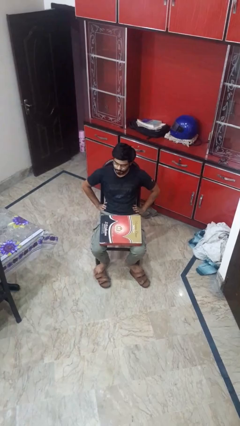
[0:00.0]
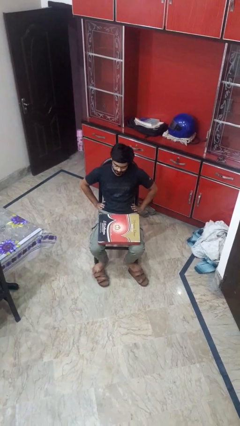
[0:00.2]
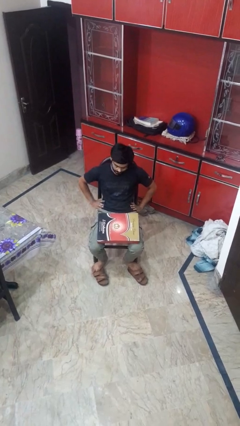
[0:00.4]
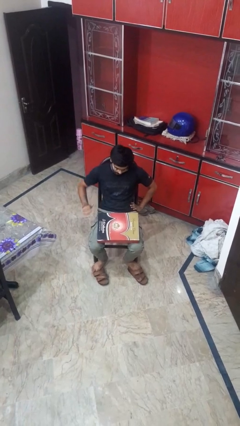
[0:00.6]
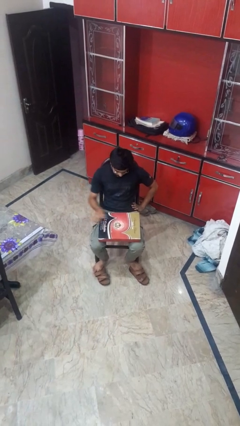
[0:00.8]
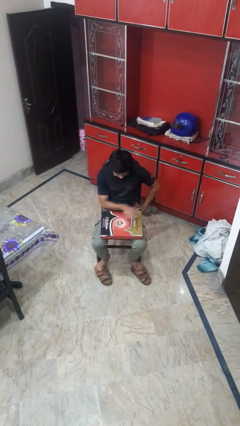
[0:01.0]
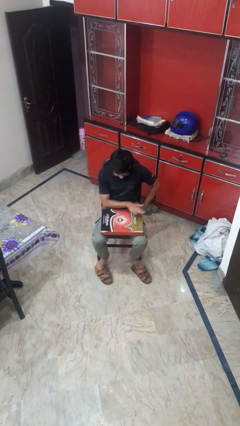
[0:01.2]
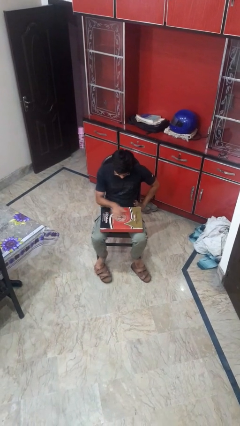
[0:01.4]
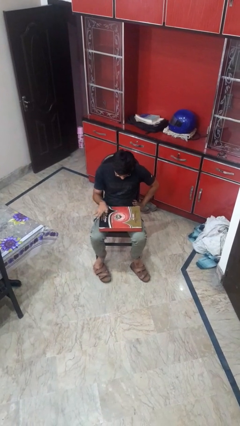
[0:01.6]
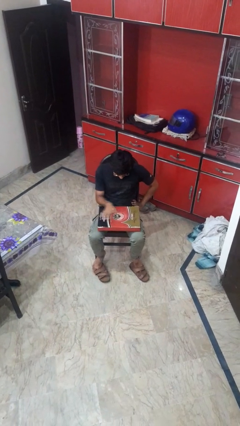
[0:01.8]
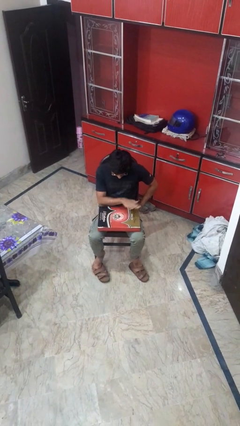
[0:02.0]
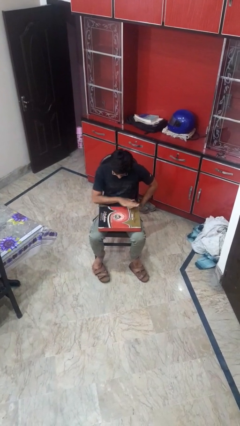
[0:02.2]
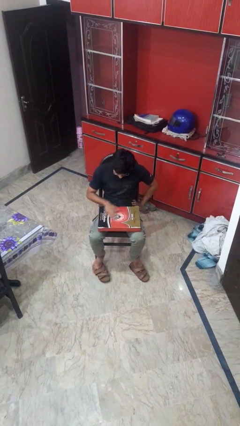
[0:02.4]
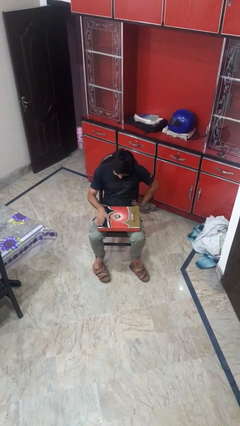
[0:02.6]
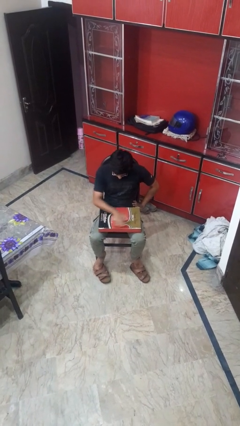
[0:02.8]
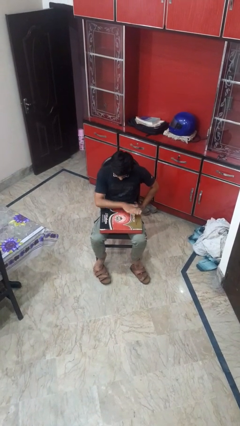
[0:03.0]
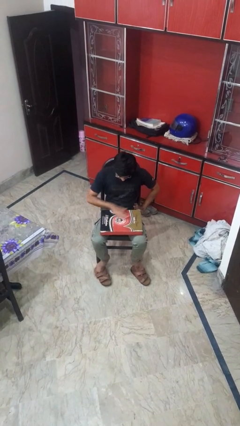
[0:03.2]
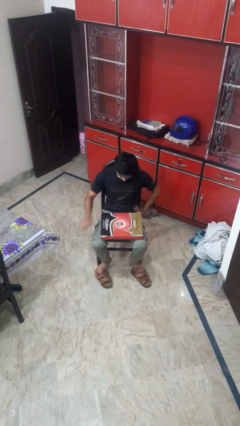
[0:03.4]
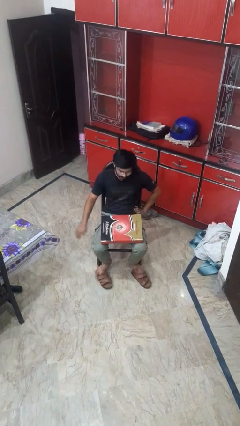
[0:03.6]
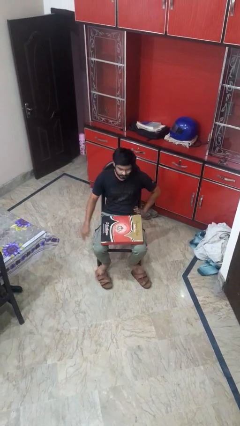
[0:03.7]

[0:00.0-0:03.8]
person waves hand over object

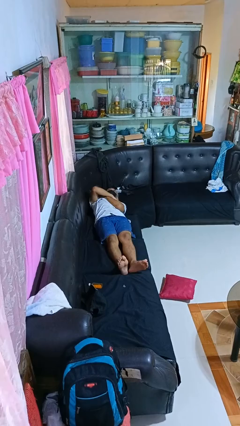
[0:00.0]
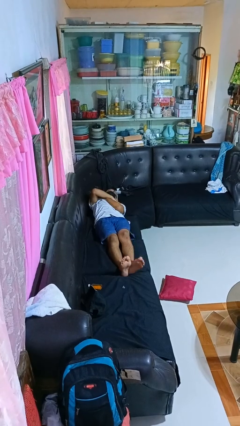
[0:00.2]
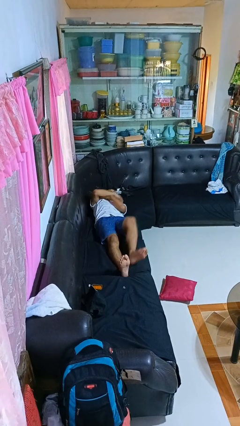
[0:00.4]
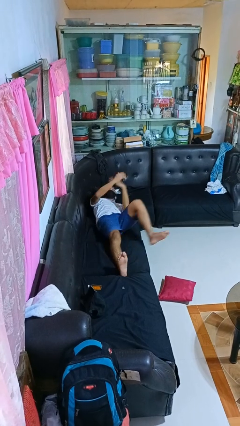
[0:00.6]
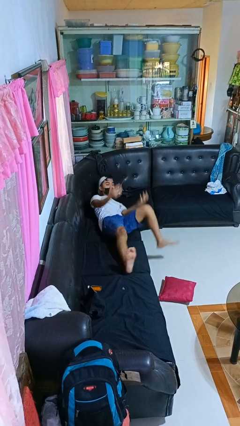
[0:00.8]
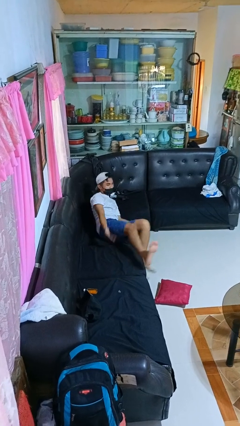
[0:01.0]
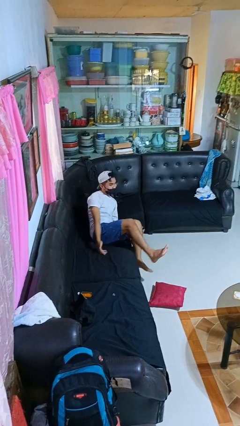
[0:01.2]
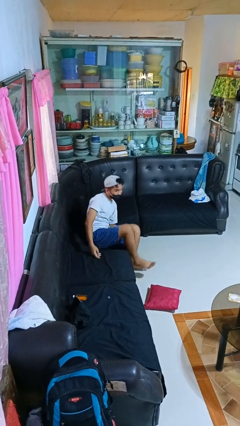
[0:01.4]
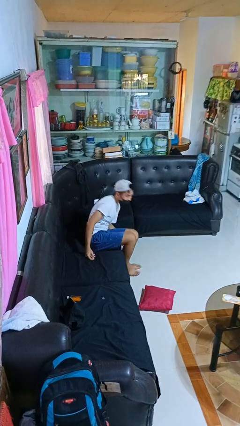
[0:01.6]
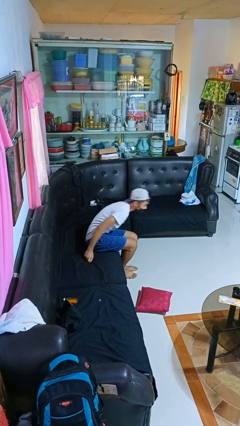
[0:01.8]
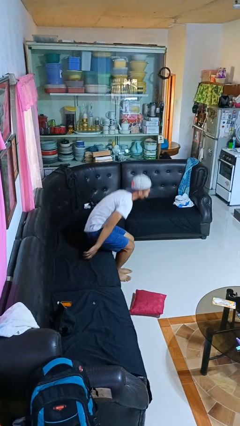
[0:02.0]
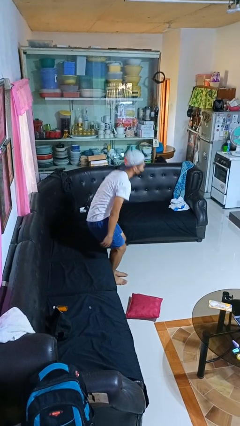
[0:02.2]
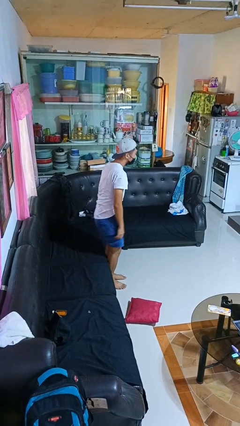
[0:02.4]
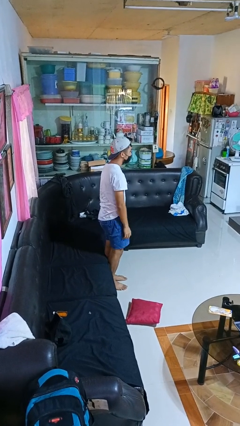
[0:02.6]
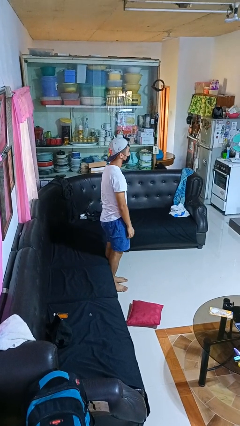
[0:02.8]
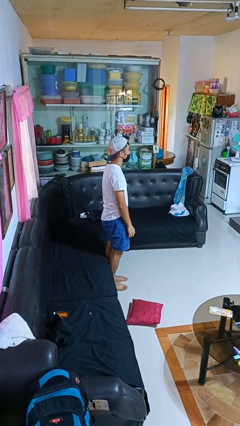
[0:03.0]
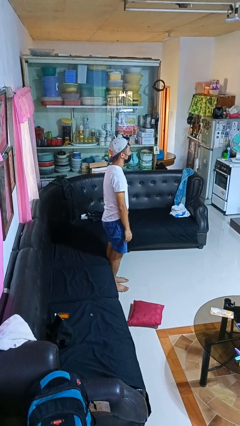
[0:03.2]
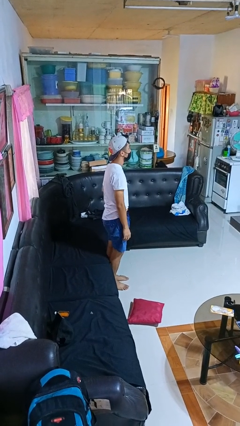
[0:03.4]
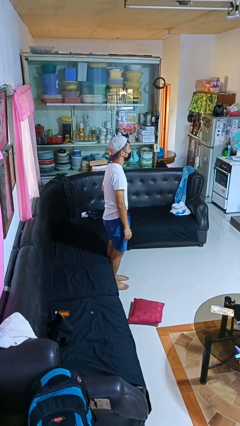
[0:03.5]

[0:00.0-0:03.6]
person stands up

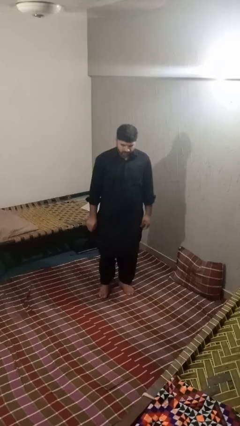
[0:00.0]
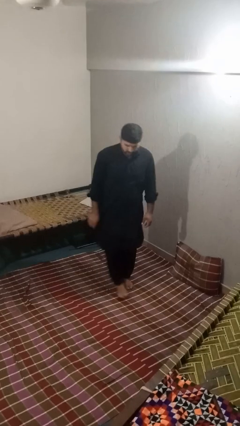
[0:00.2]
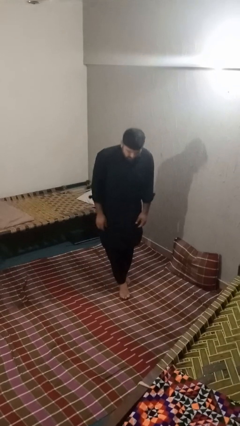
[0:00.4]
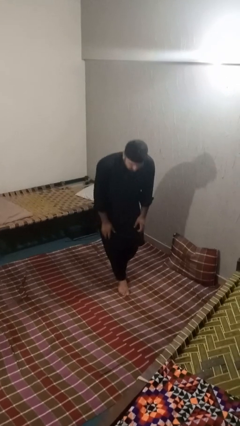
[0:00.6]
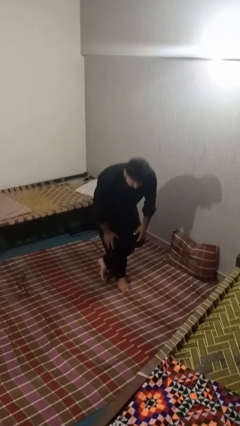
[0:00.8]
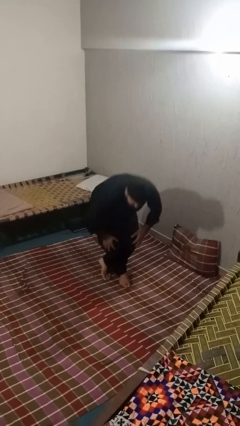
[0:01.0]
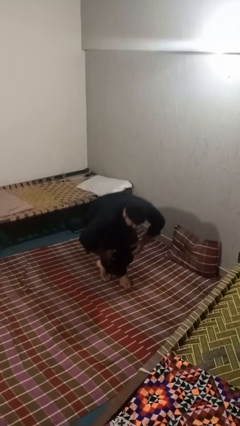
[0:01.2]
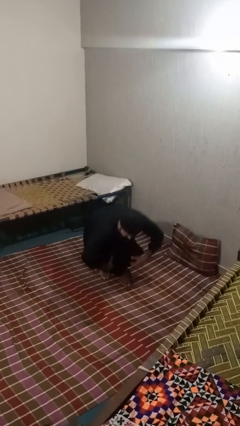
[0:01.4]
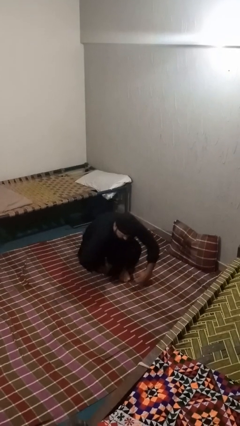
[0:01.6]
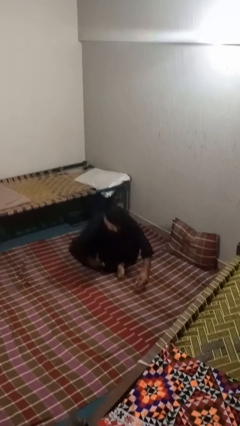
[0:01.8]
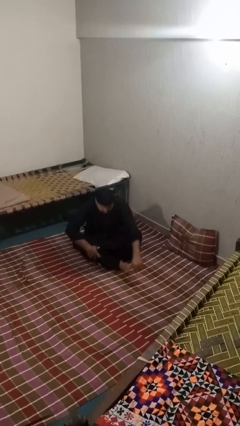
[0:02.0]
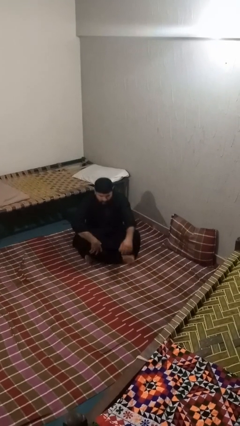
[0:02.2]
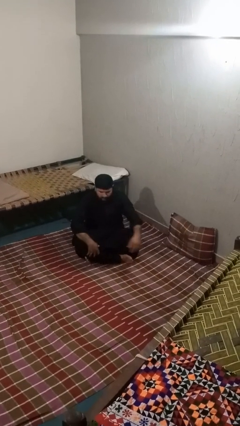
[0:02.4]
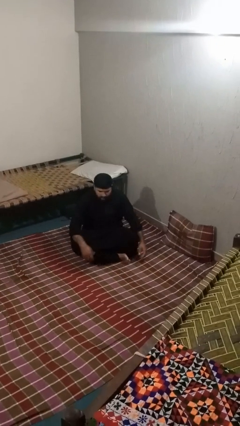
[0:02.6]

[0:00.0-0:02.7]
person sits crisscross

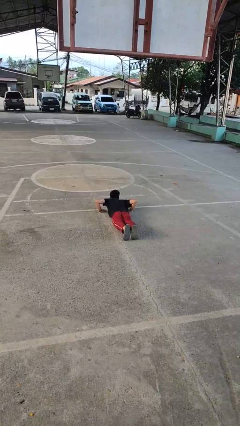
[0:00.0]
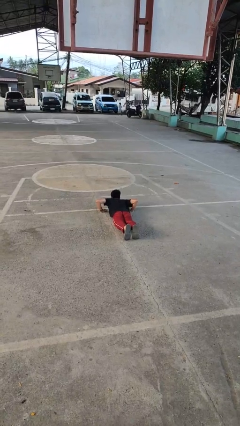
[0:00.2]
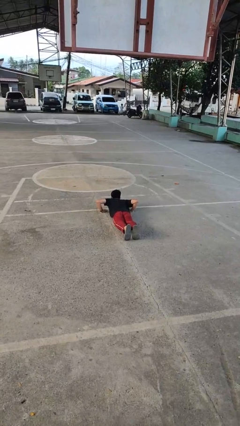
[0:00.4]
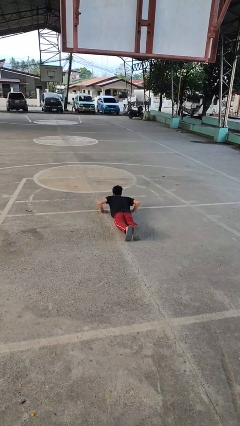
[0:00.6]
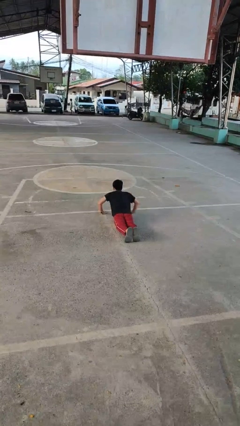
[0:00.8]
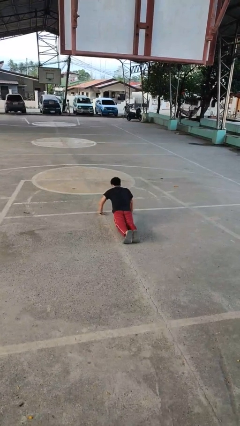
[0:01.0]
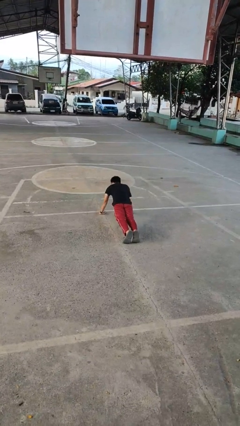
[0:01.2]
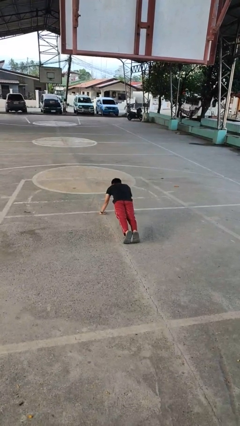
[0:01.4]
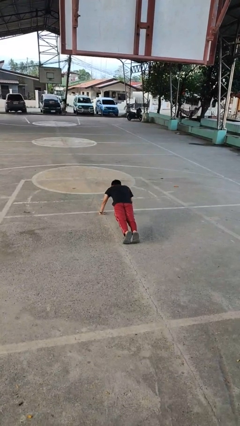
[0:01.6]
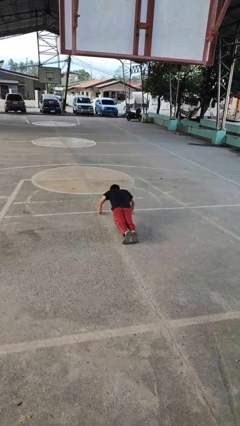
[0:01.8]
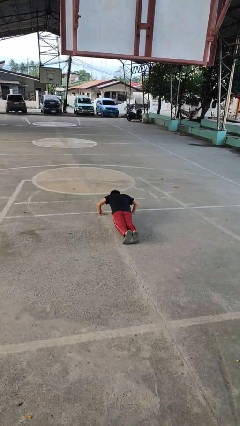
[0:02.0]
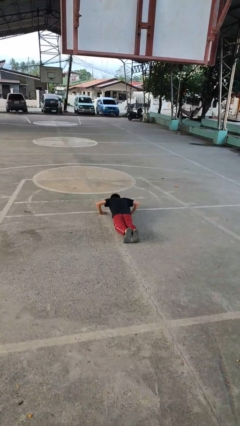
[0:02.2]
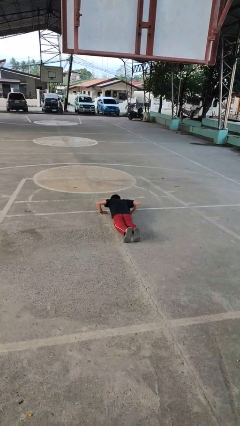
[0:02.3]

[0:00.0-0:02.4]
person exercises with pushup

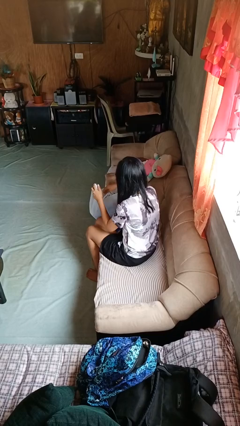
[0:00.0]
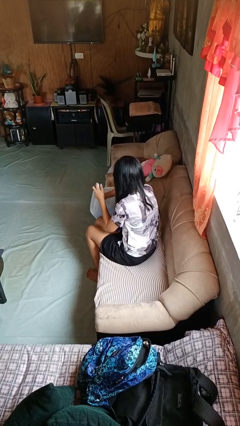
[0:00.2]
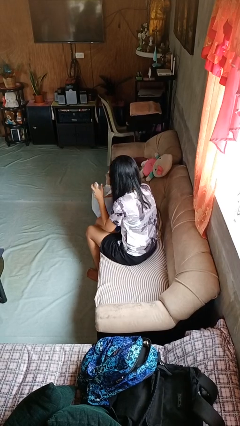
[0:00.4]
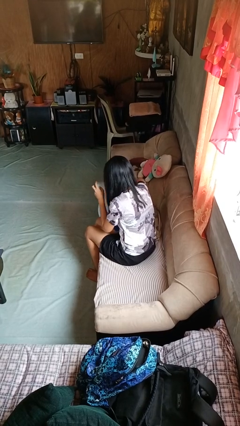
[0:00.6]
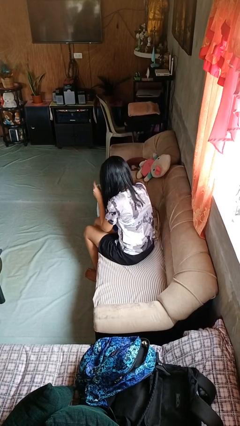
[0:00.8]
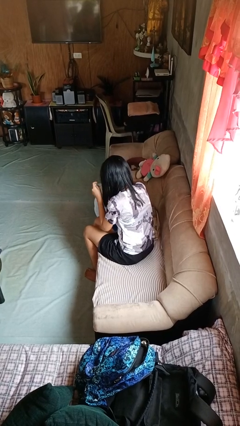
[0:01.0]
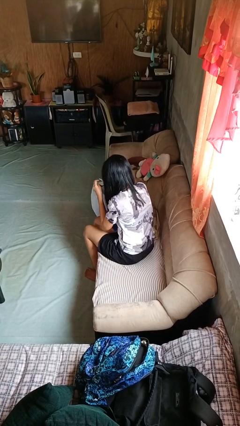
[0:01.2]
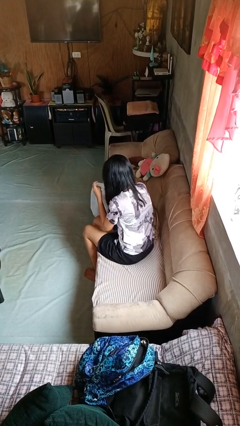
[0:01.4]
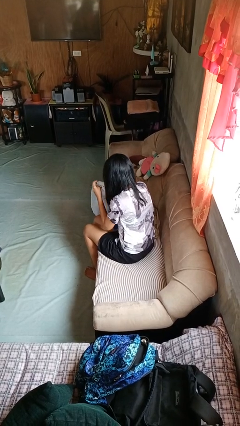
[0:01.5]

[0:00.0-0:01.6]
person searches in bag

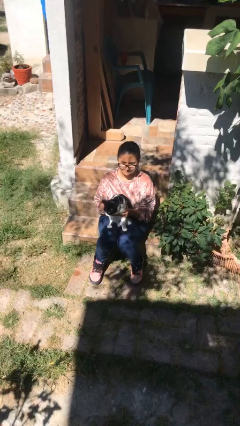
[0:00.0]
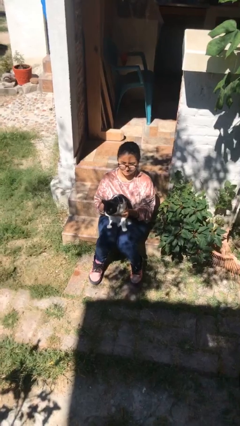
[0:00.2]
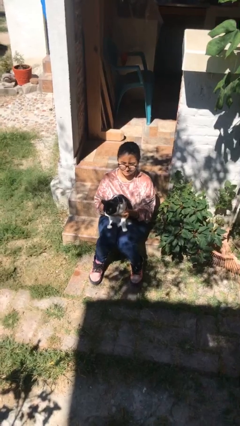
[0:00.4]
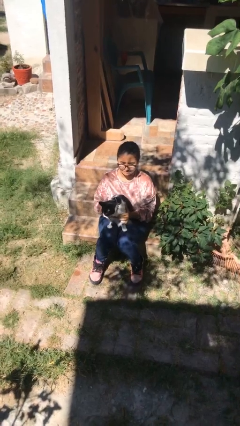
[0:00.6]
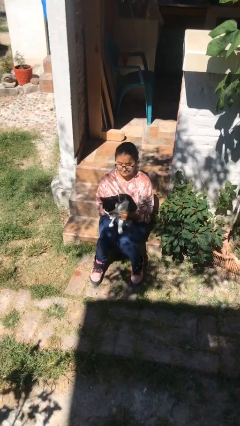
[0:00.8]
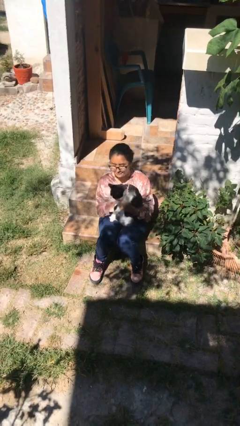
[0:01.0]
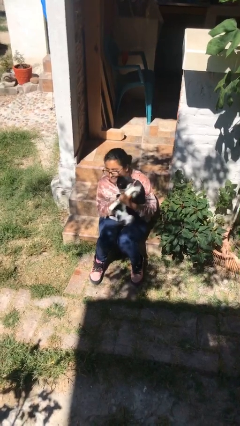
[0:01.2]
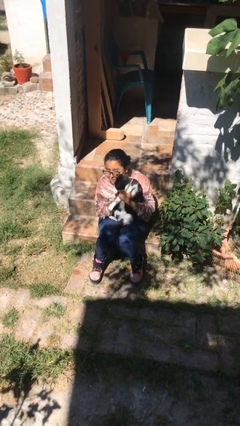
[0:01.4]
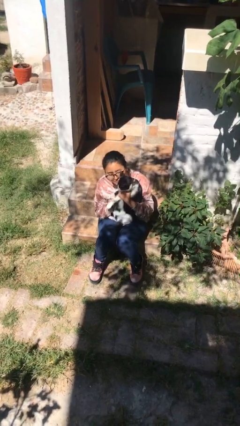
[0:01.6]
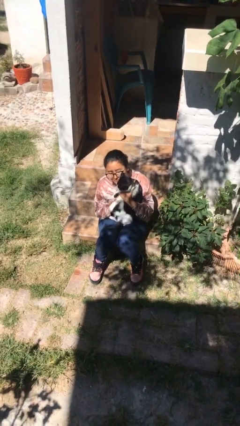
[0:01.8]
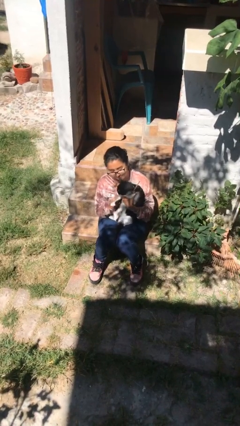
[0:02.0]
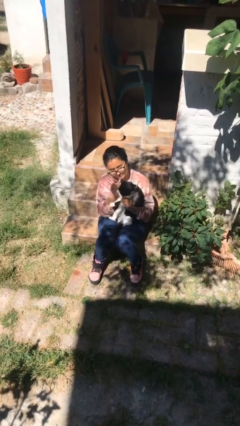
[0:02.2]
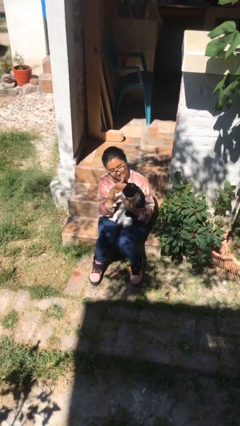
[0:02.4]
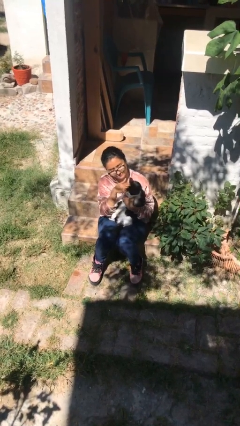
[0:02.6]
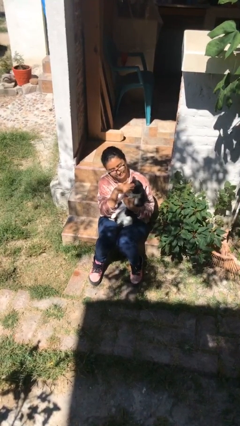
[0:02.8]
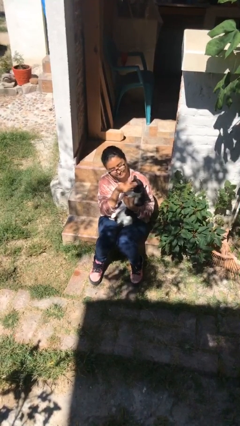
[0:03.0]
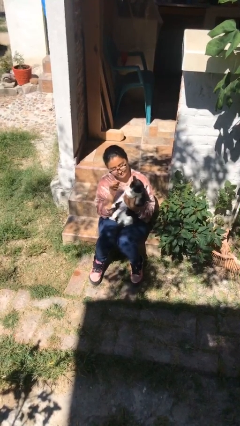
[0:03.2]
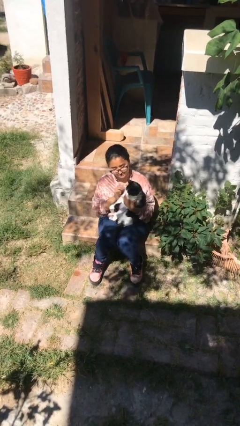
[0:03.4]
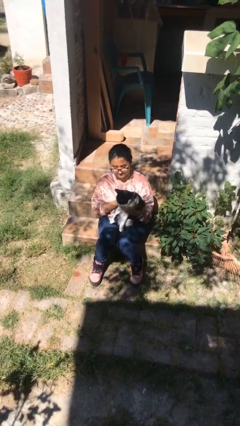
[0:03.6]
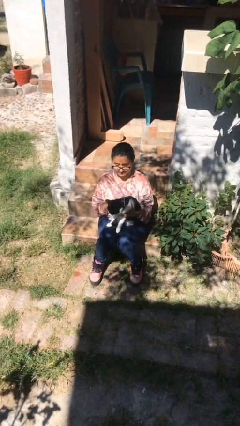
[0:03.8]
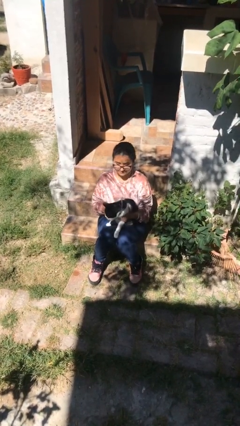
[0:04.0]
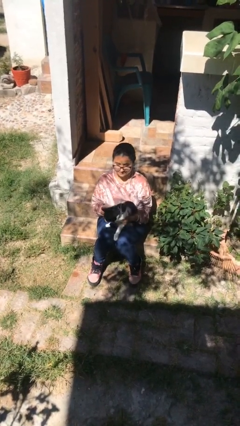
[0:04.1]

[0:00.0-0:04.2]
person hugs cat
